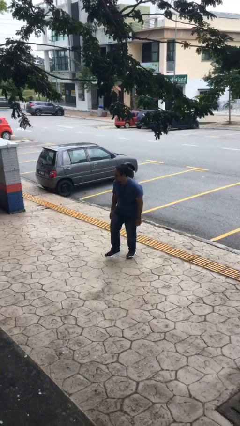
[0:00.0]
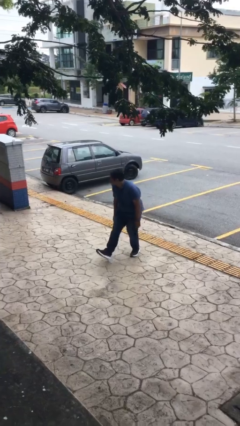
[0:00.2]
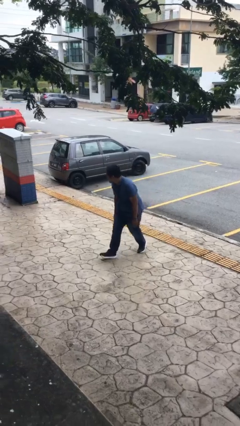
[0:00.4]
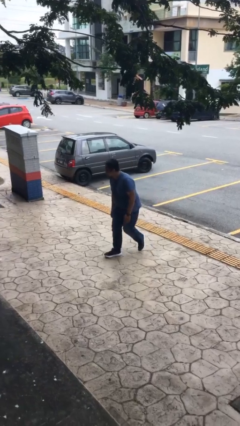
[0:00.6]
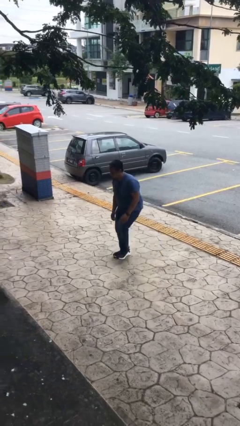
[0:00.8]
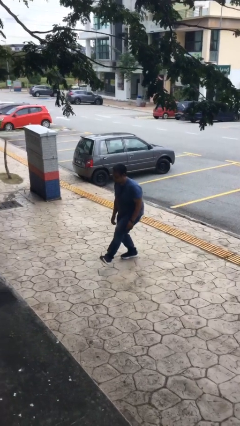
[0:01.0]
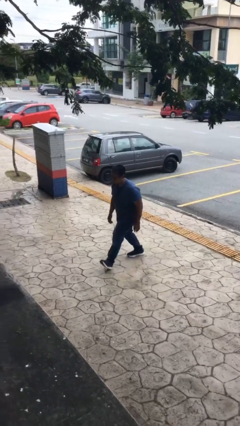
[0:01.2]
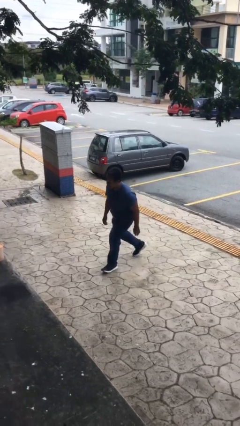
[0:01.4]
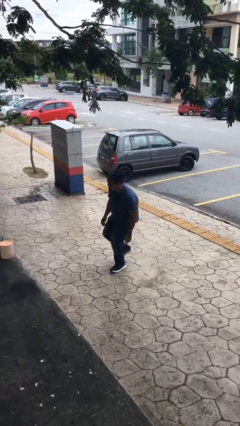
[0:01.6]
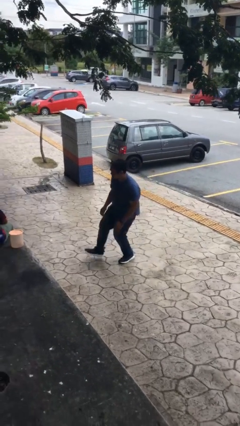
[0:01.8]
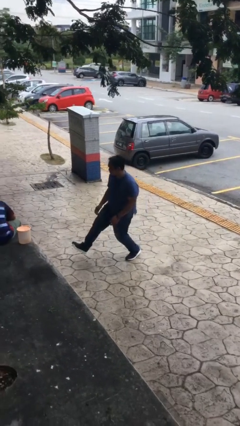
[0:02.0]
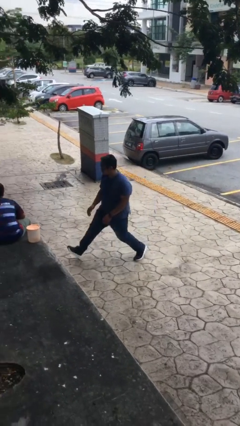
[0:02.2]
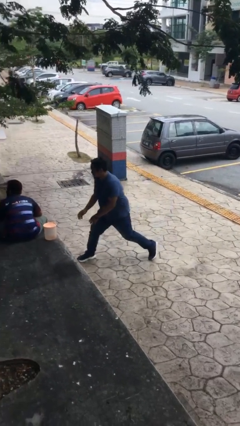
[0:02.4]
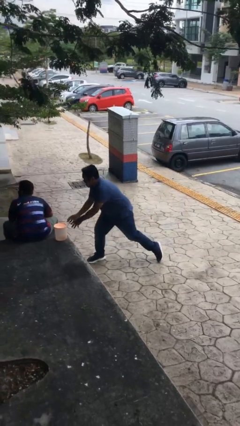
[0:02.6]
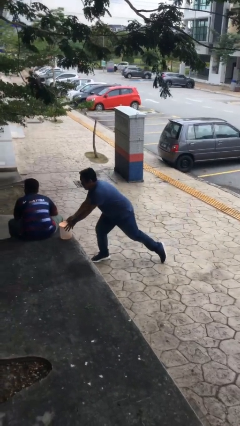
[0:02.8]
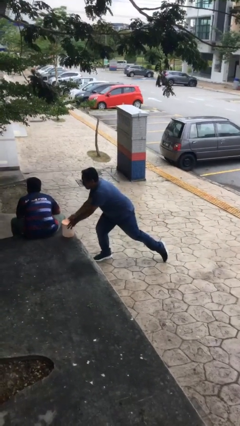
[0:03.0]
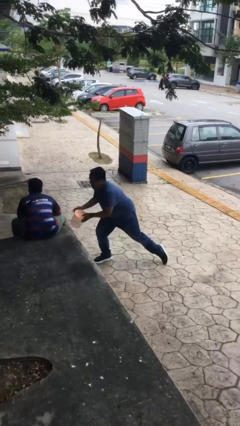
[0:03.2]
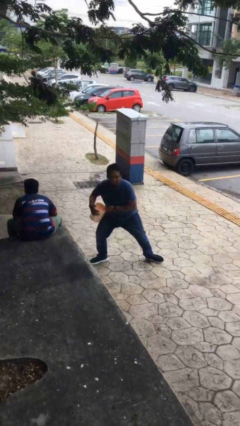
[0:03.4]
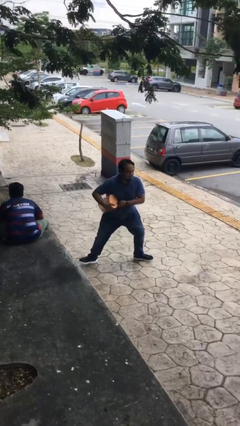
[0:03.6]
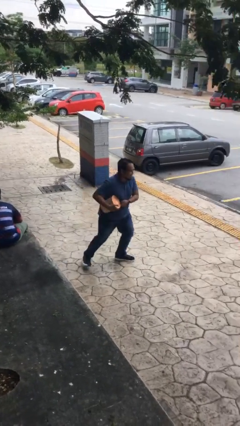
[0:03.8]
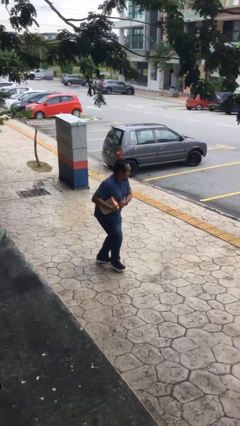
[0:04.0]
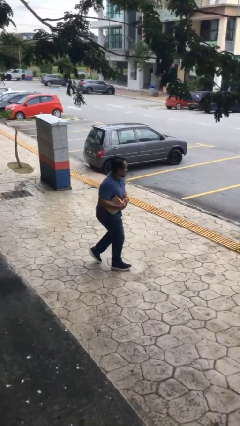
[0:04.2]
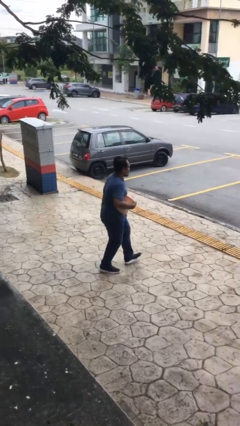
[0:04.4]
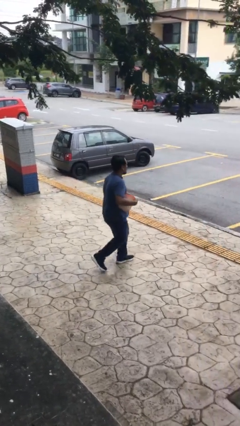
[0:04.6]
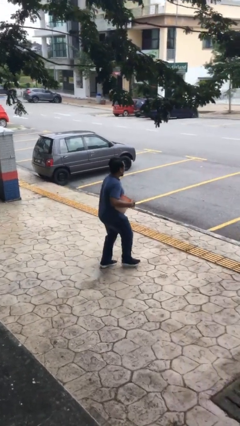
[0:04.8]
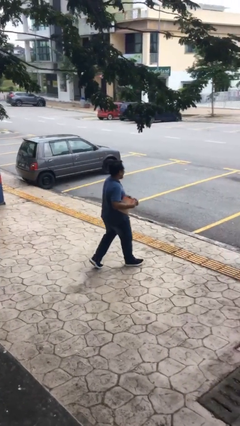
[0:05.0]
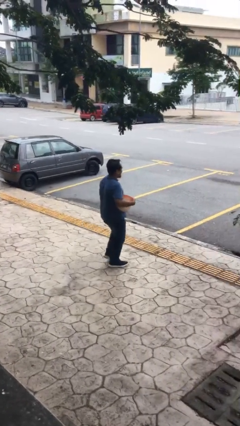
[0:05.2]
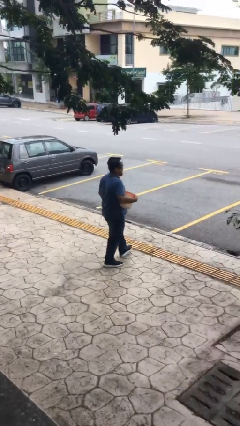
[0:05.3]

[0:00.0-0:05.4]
person steals object from person

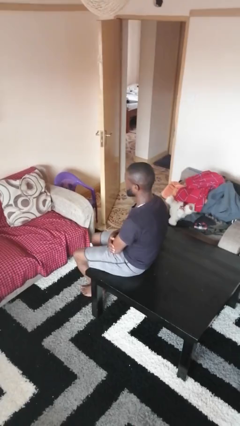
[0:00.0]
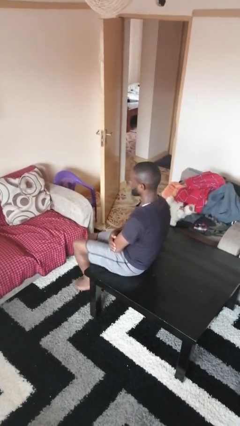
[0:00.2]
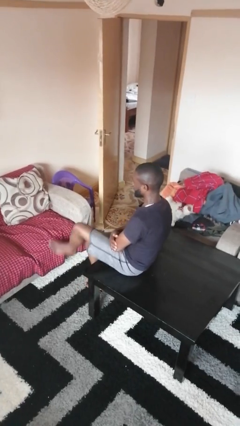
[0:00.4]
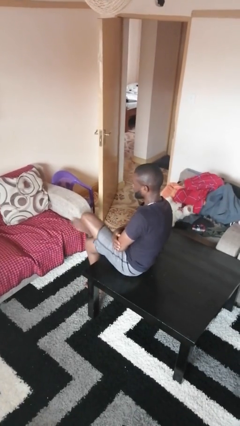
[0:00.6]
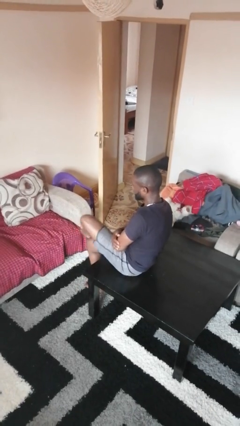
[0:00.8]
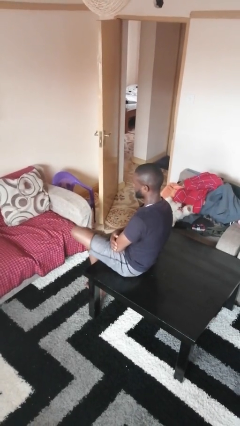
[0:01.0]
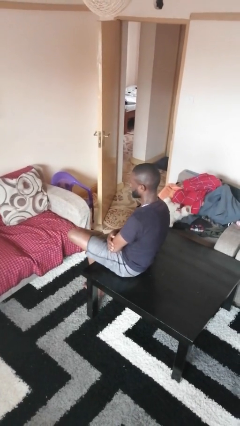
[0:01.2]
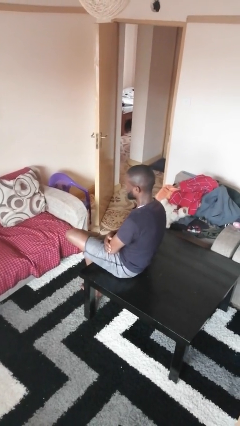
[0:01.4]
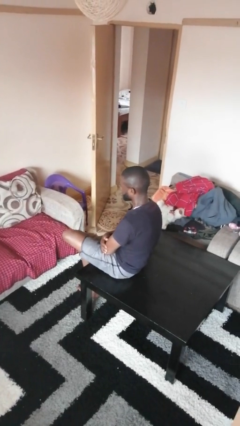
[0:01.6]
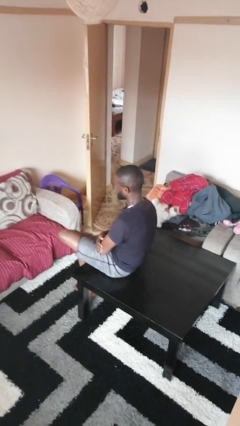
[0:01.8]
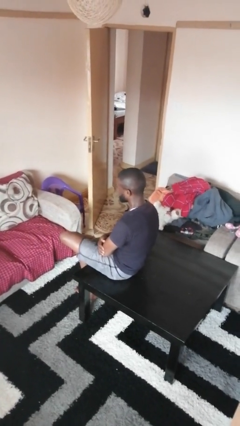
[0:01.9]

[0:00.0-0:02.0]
person crosses legs

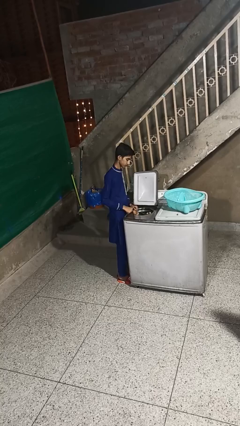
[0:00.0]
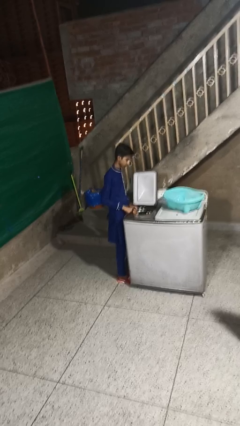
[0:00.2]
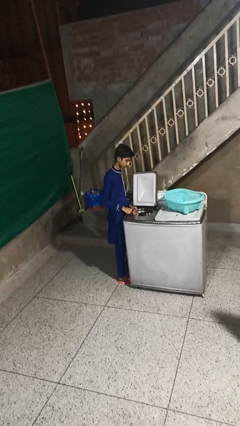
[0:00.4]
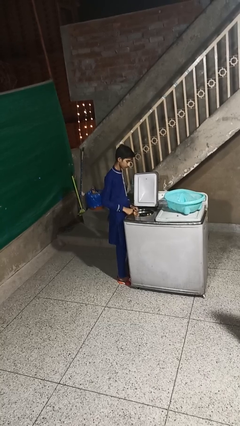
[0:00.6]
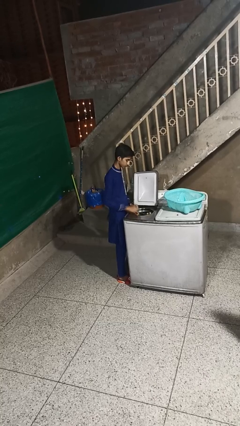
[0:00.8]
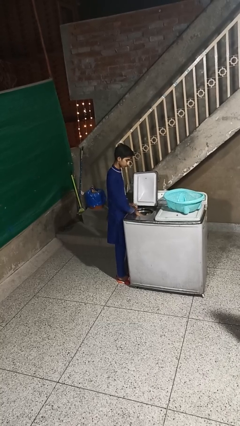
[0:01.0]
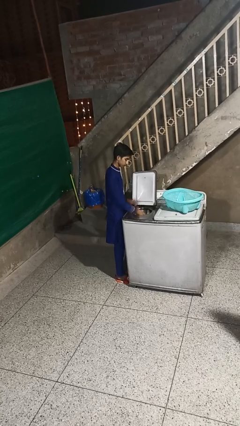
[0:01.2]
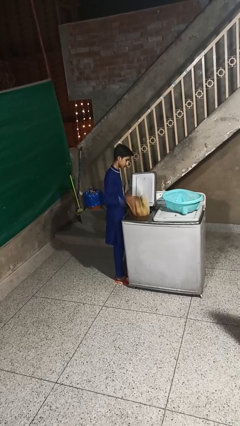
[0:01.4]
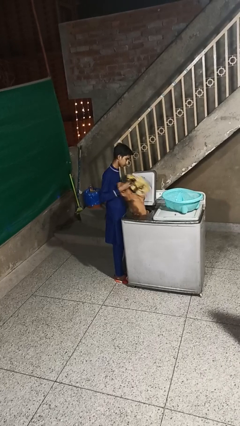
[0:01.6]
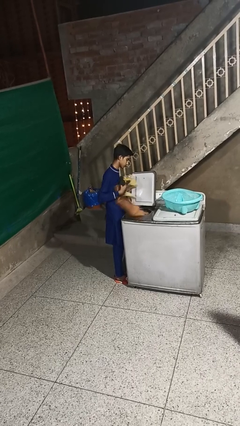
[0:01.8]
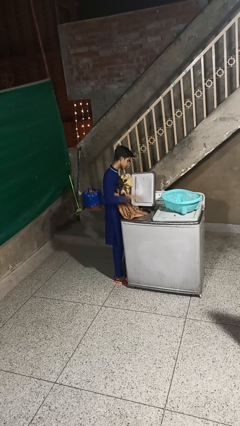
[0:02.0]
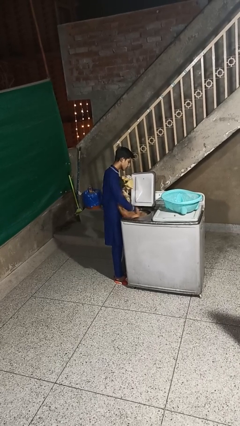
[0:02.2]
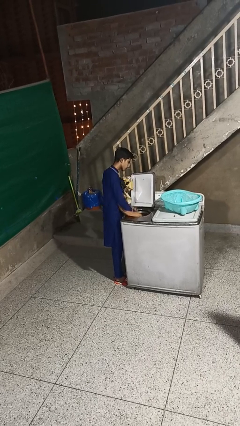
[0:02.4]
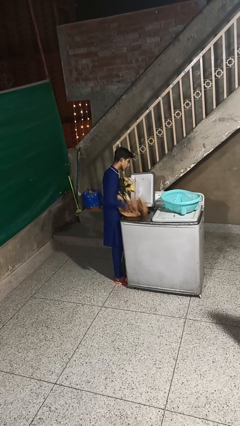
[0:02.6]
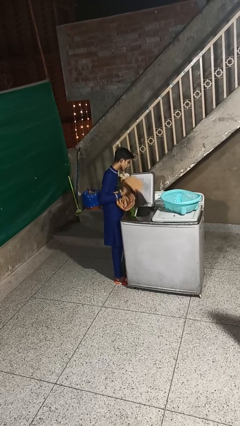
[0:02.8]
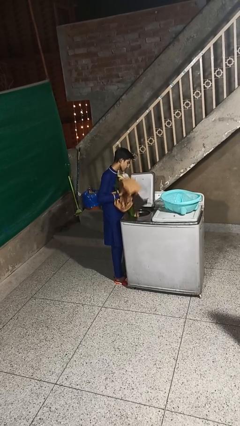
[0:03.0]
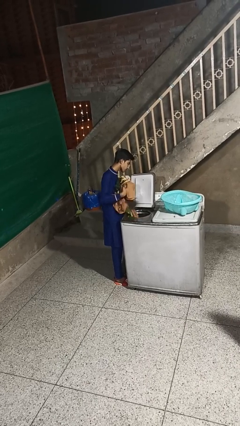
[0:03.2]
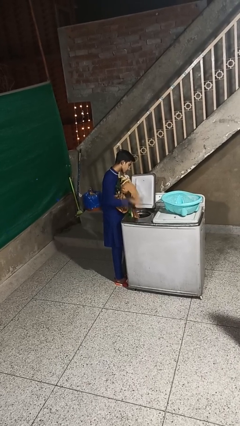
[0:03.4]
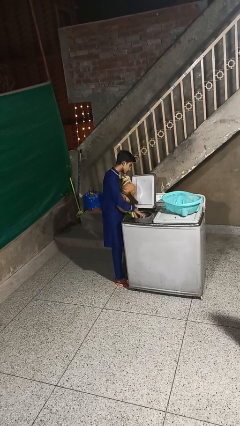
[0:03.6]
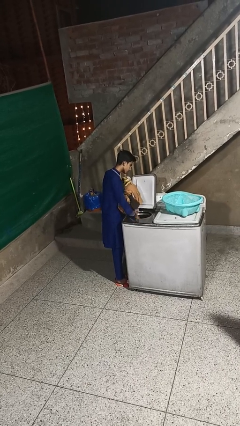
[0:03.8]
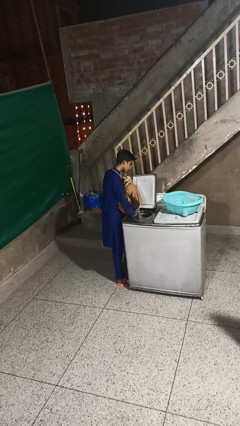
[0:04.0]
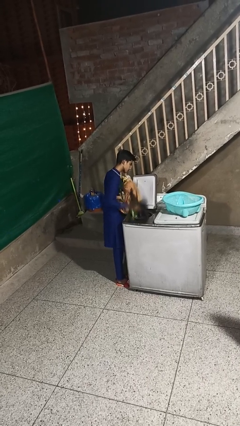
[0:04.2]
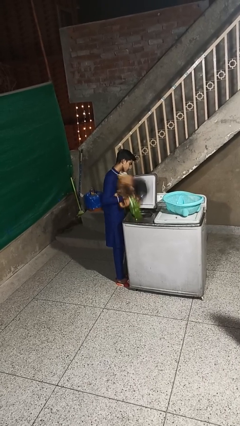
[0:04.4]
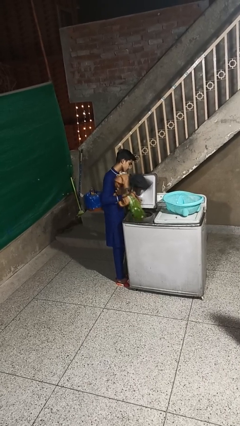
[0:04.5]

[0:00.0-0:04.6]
person unloads dryer

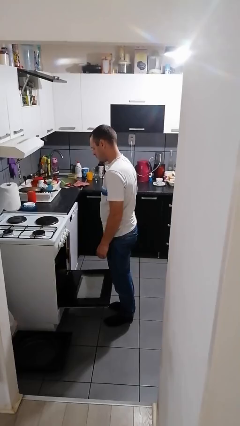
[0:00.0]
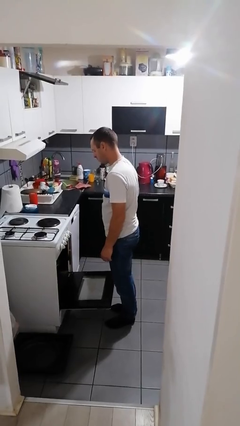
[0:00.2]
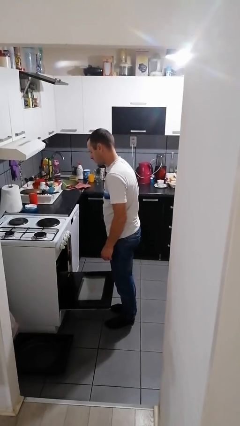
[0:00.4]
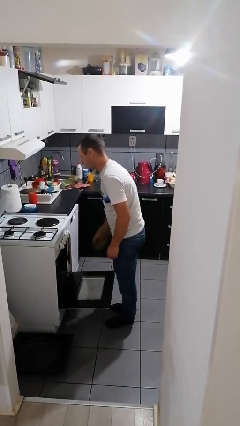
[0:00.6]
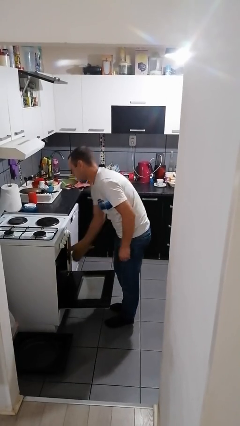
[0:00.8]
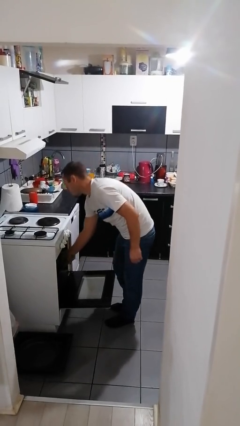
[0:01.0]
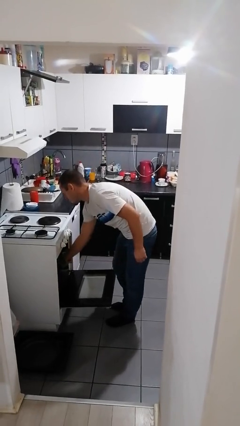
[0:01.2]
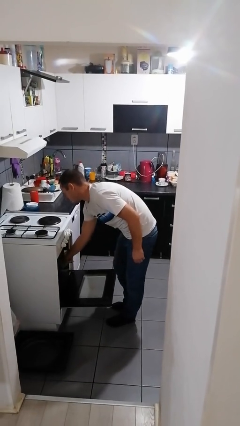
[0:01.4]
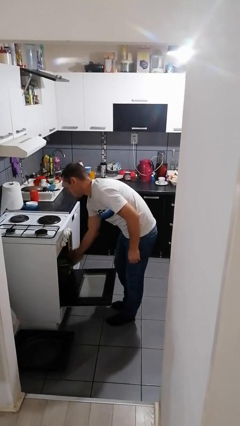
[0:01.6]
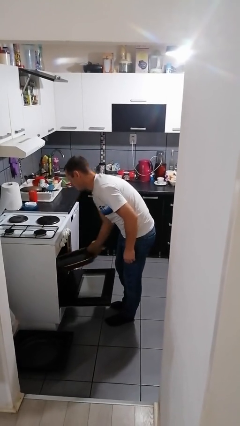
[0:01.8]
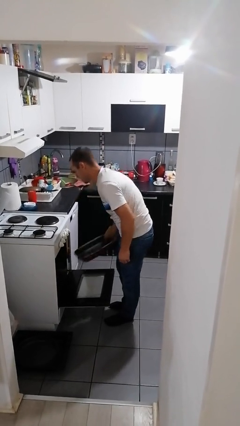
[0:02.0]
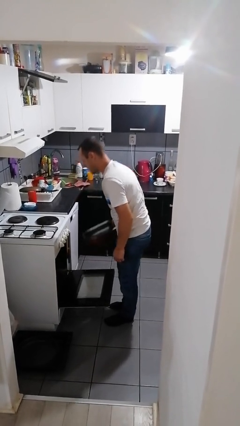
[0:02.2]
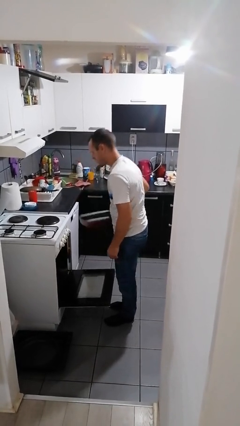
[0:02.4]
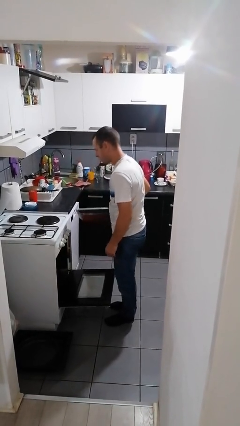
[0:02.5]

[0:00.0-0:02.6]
person takes object from oven

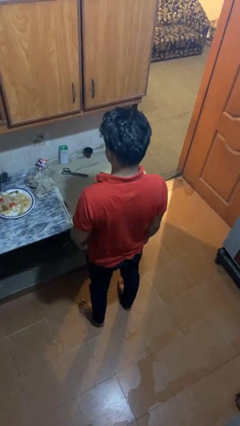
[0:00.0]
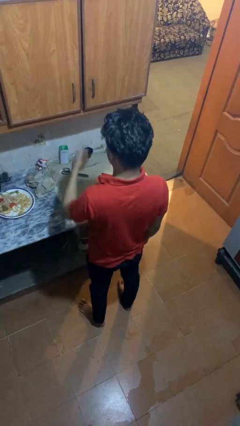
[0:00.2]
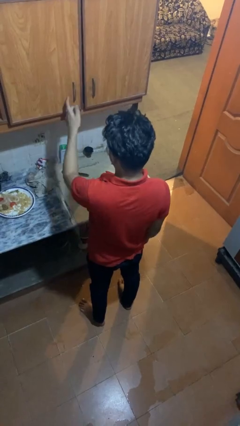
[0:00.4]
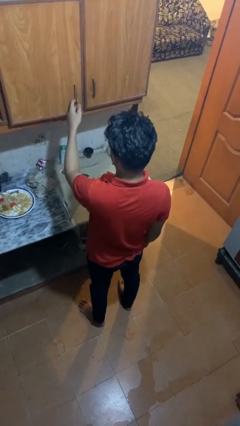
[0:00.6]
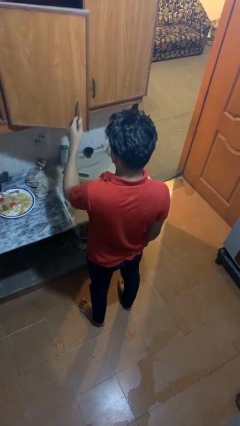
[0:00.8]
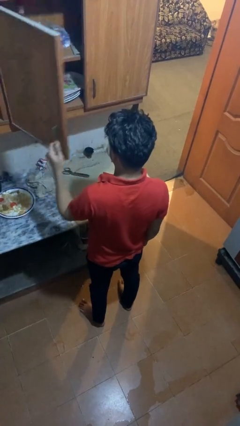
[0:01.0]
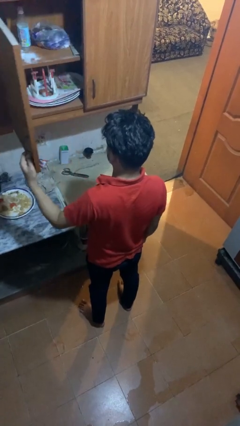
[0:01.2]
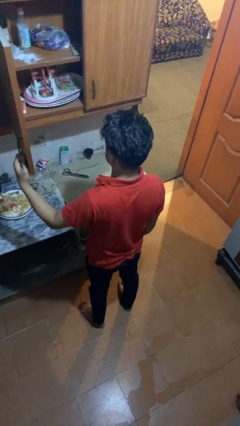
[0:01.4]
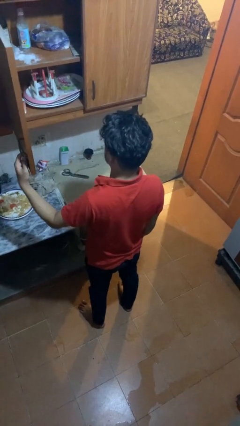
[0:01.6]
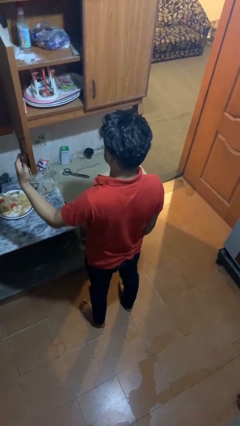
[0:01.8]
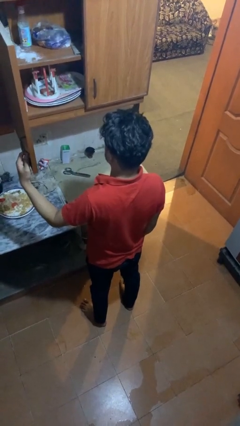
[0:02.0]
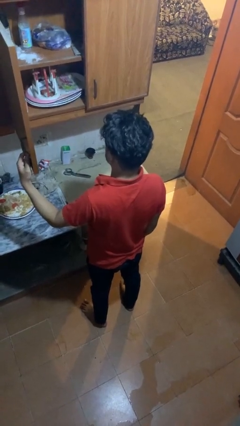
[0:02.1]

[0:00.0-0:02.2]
person opens cabinet
